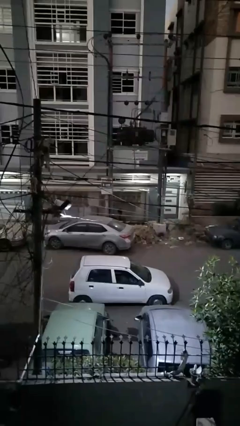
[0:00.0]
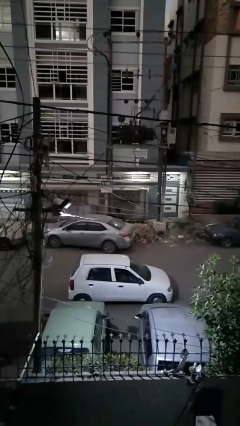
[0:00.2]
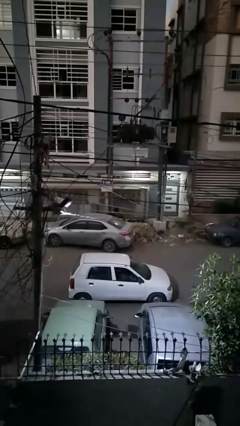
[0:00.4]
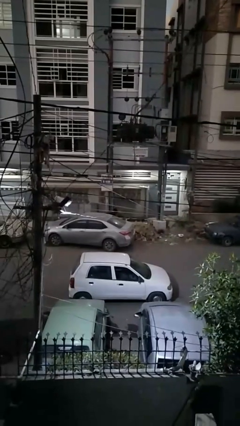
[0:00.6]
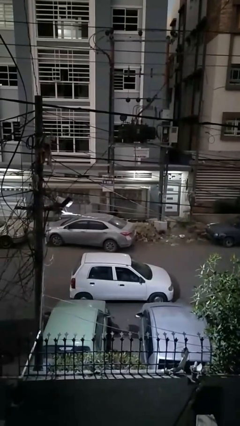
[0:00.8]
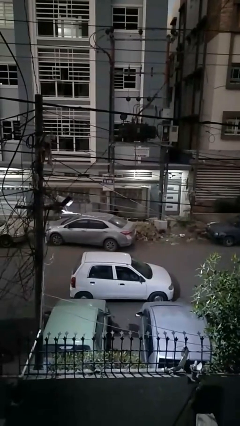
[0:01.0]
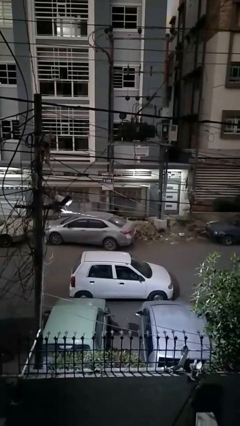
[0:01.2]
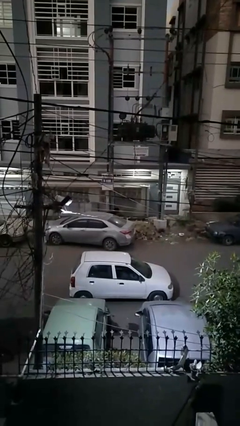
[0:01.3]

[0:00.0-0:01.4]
person loads car

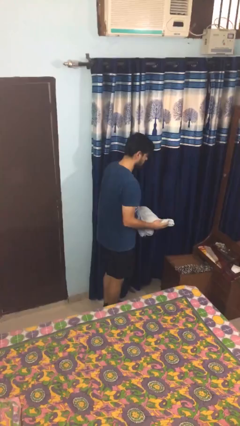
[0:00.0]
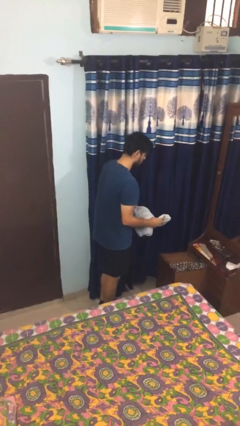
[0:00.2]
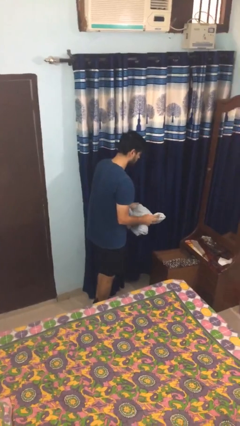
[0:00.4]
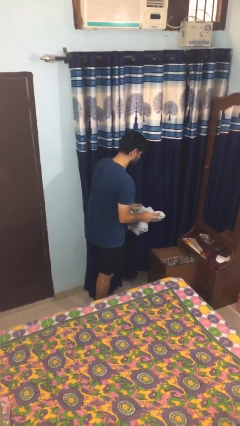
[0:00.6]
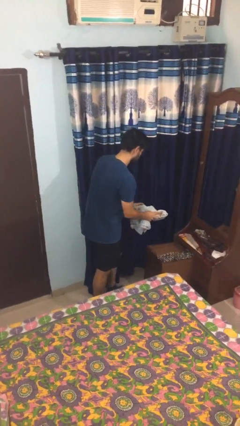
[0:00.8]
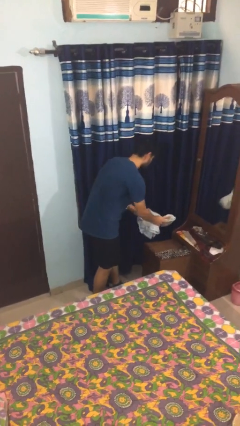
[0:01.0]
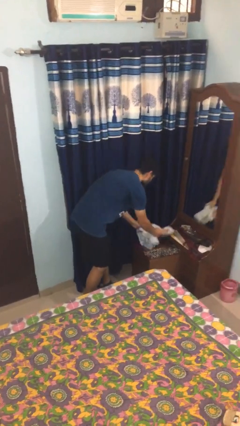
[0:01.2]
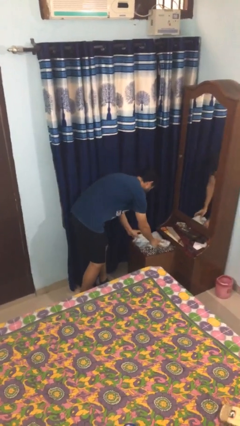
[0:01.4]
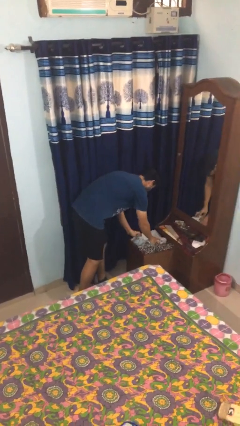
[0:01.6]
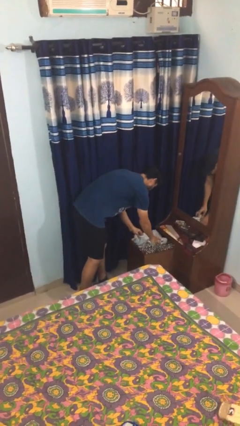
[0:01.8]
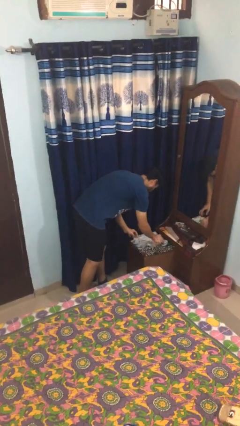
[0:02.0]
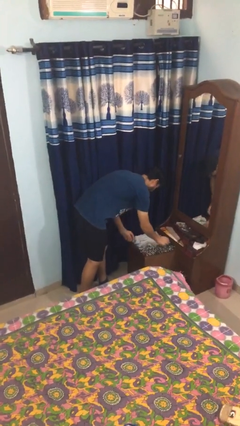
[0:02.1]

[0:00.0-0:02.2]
person puts clothes into dresser

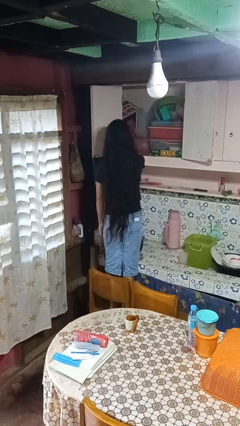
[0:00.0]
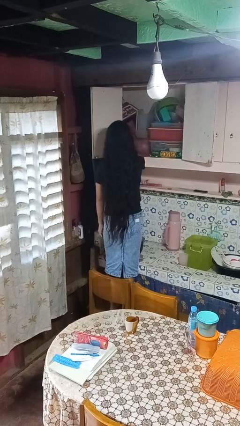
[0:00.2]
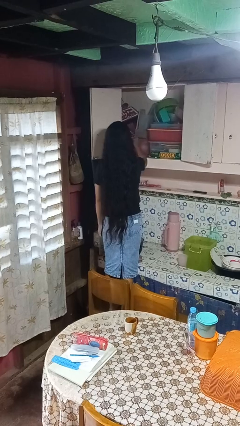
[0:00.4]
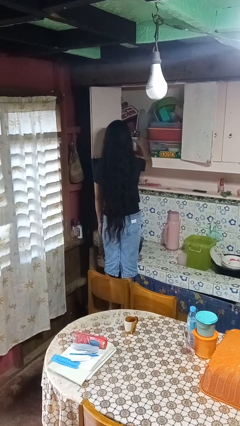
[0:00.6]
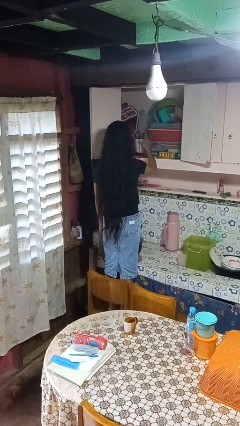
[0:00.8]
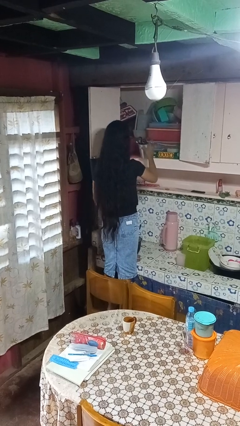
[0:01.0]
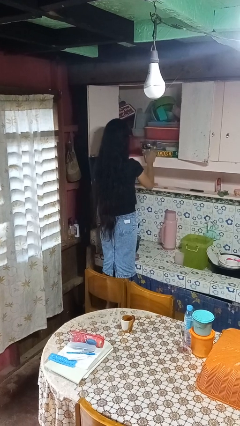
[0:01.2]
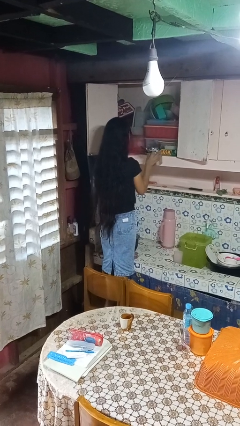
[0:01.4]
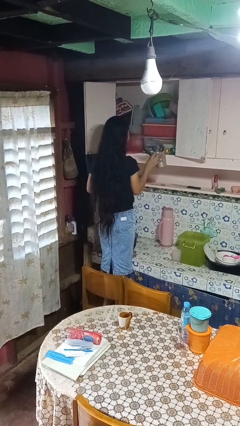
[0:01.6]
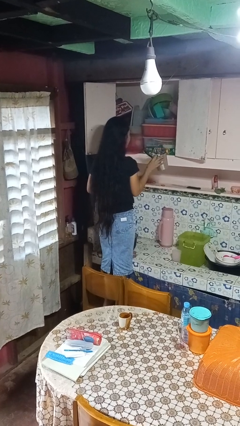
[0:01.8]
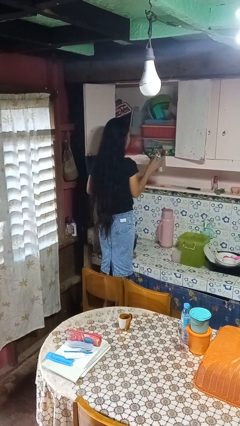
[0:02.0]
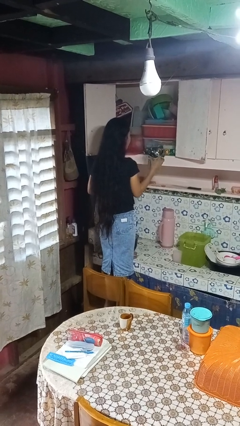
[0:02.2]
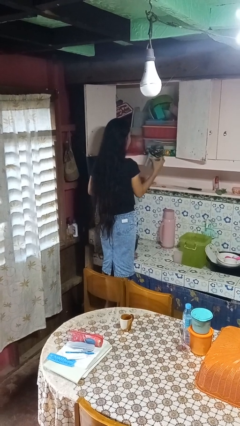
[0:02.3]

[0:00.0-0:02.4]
person takes object from cabinet

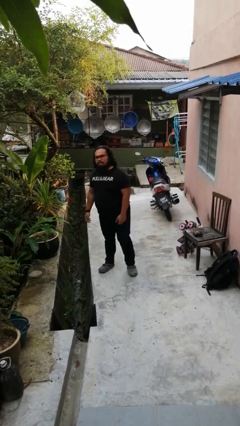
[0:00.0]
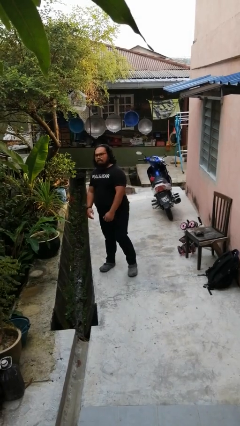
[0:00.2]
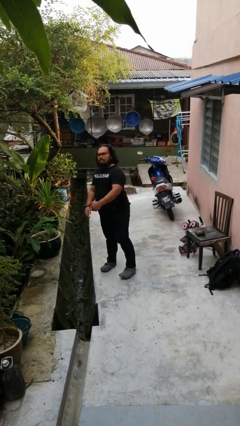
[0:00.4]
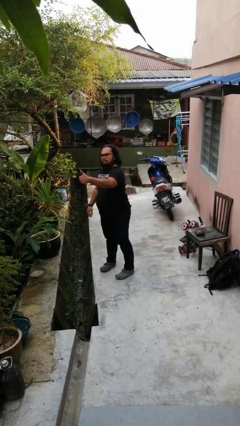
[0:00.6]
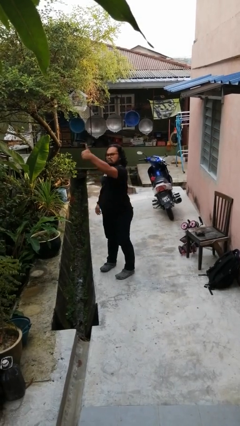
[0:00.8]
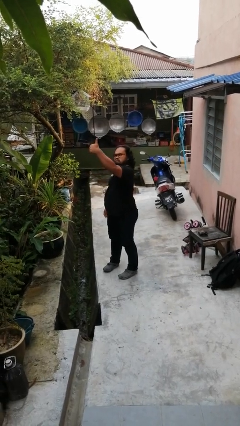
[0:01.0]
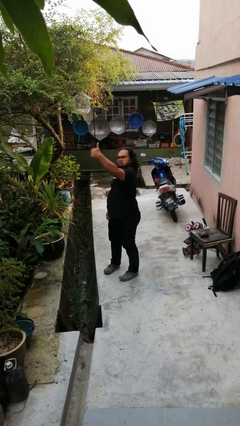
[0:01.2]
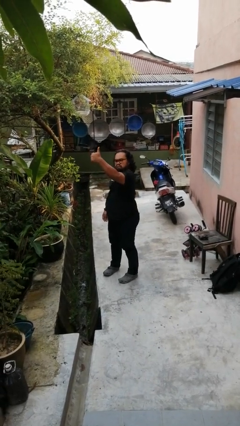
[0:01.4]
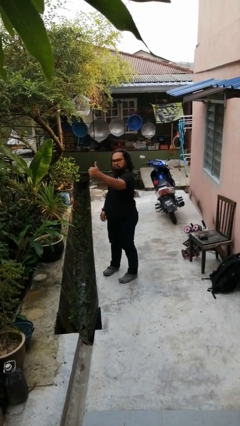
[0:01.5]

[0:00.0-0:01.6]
person gestures thumbs up

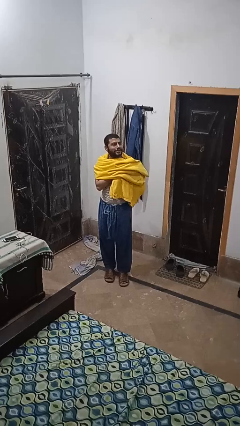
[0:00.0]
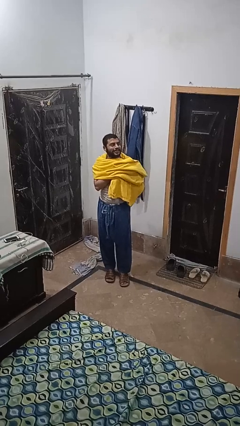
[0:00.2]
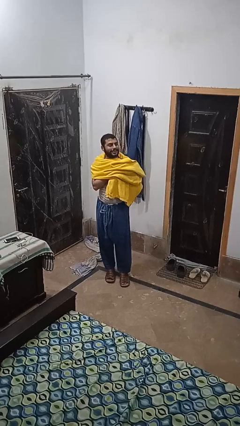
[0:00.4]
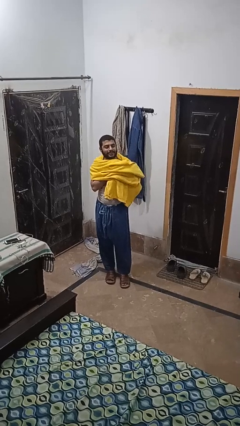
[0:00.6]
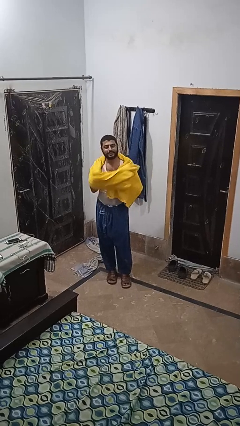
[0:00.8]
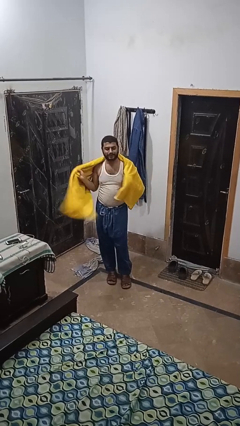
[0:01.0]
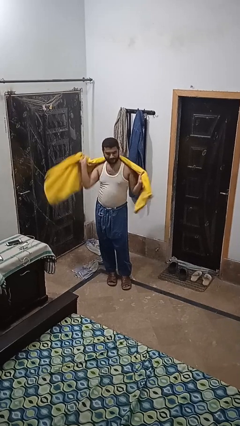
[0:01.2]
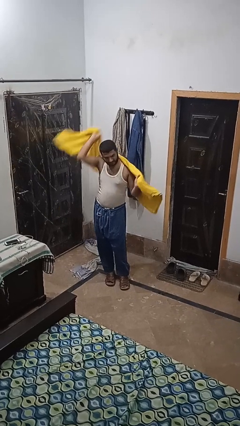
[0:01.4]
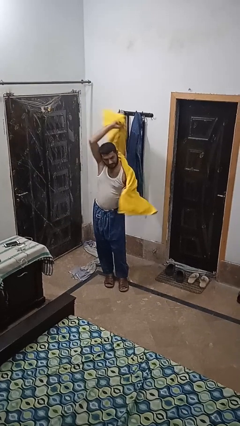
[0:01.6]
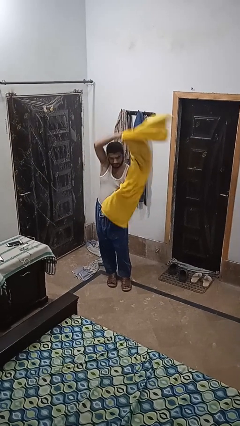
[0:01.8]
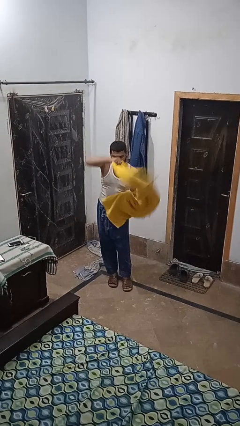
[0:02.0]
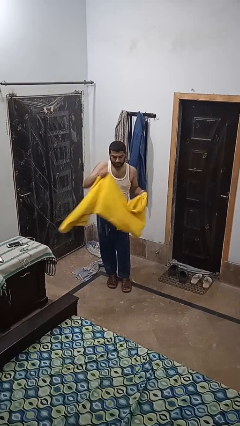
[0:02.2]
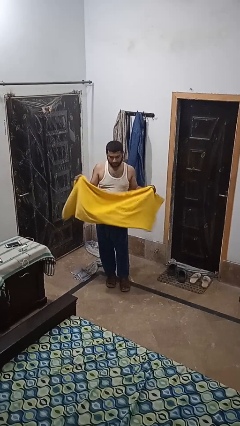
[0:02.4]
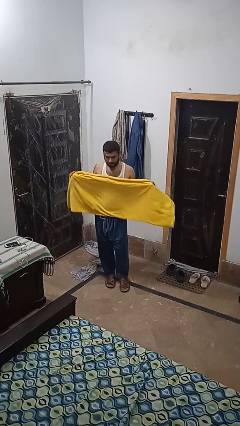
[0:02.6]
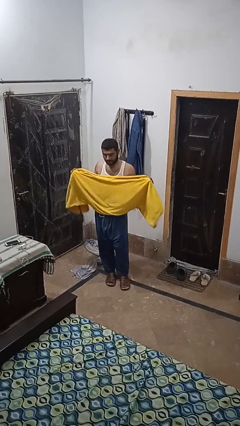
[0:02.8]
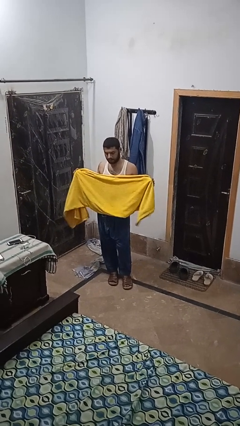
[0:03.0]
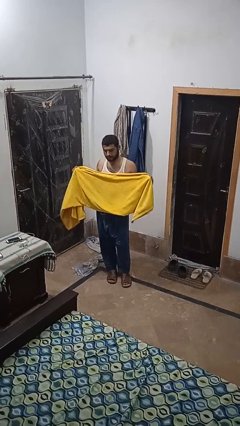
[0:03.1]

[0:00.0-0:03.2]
person takes off scarf

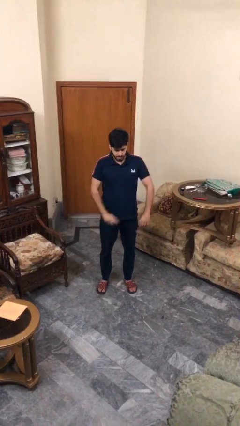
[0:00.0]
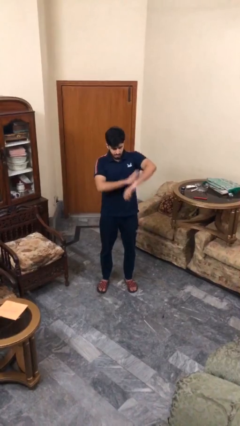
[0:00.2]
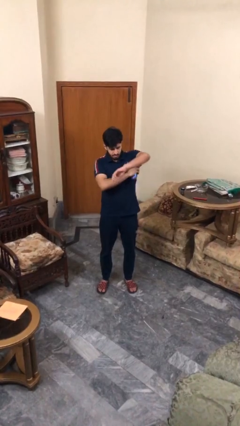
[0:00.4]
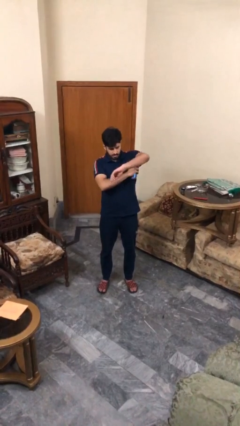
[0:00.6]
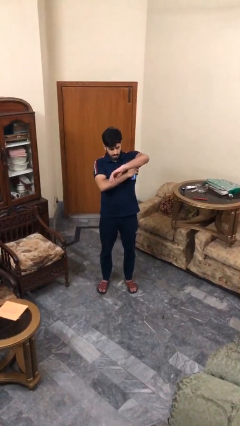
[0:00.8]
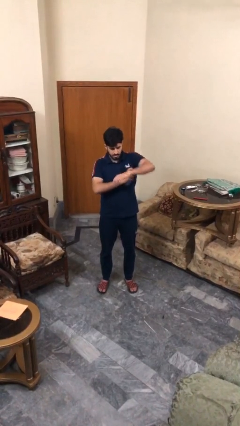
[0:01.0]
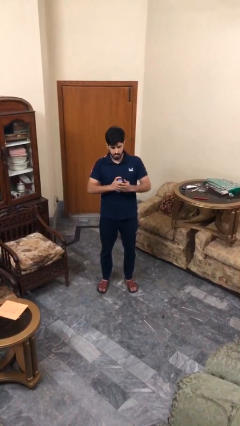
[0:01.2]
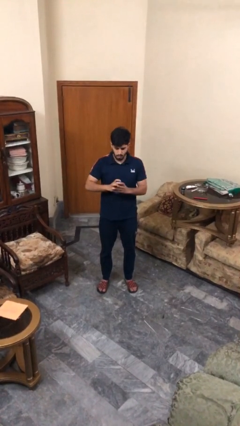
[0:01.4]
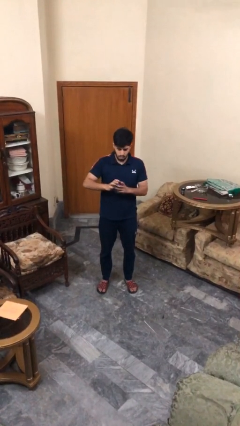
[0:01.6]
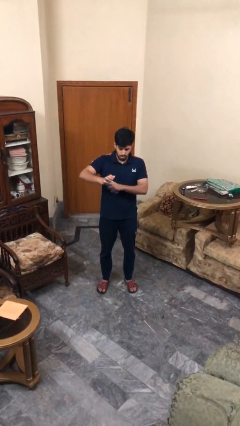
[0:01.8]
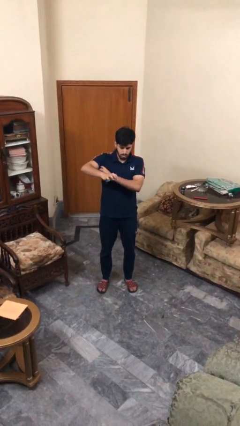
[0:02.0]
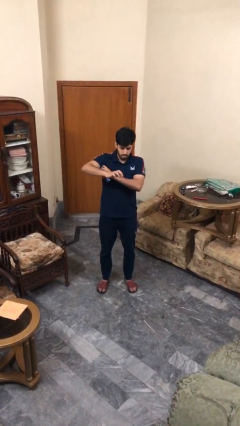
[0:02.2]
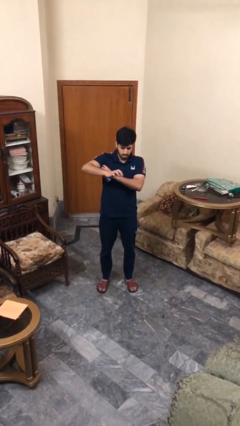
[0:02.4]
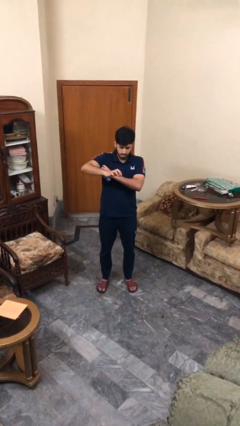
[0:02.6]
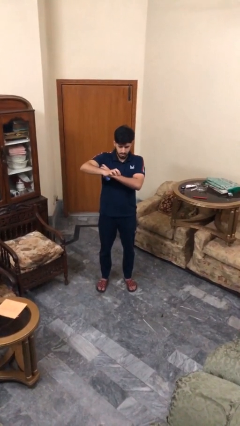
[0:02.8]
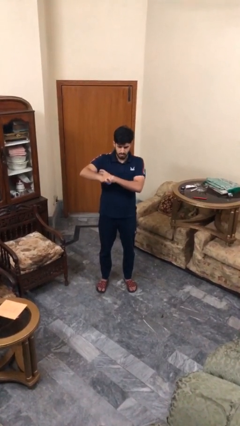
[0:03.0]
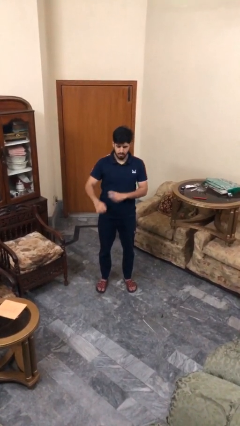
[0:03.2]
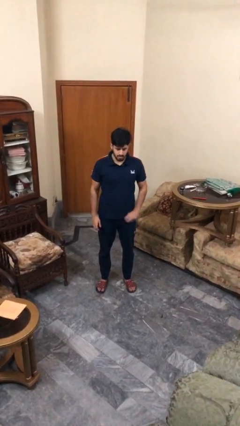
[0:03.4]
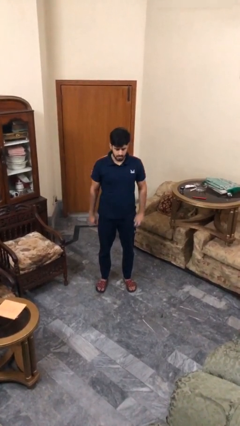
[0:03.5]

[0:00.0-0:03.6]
person applies deodorant

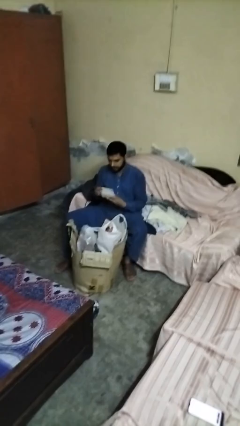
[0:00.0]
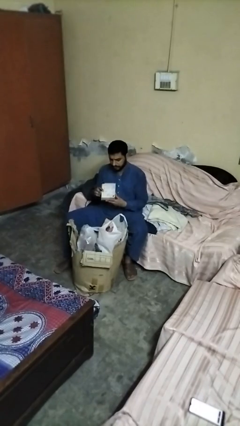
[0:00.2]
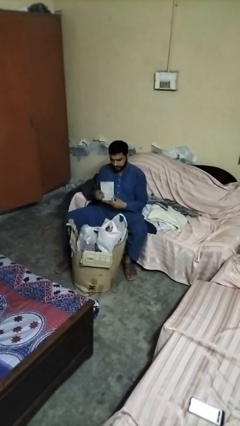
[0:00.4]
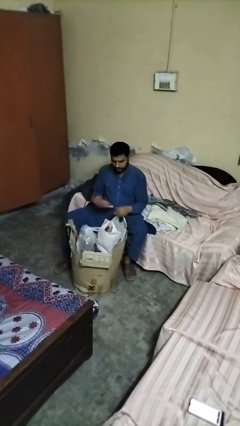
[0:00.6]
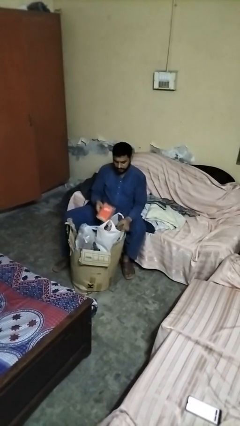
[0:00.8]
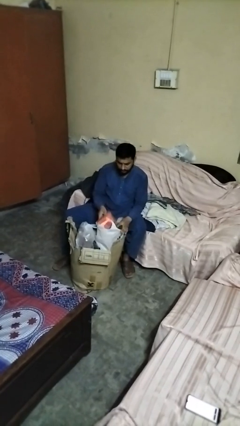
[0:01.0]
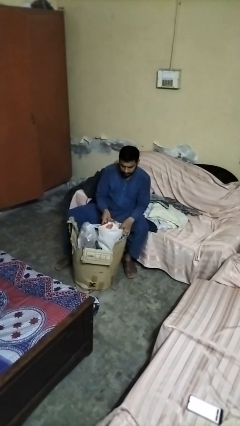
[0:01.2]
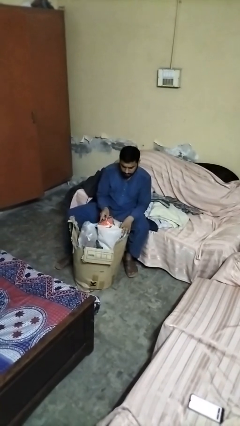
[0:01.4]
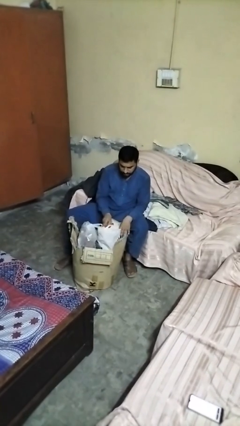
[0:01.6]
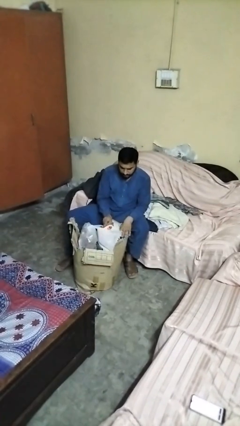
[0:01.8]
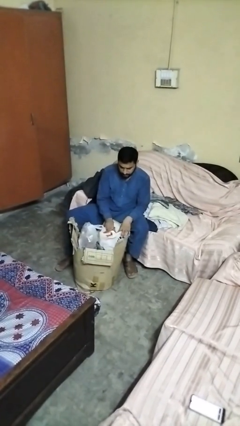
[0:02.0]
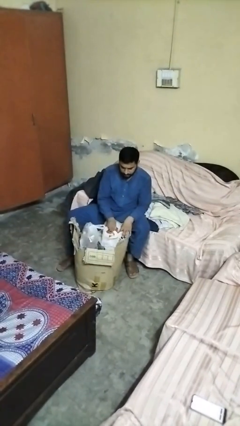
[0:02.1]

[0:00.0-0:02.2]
person puts object into box

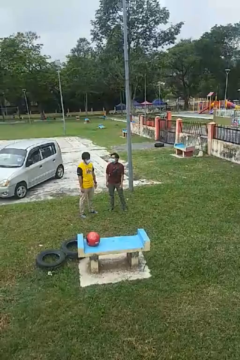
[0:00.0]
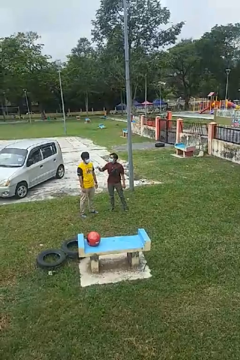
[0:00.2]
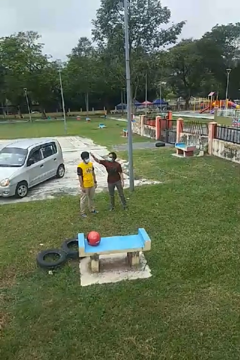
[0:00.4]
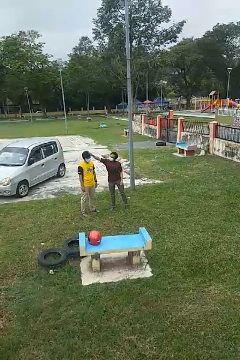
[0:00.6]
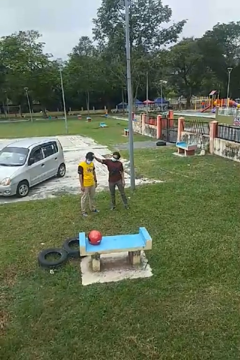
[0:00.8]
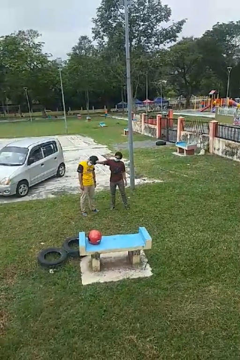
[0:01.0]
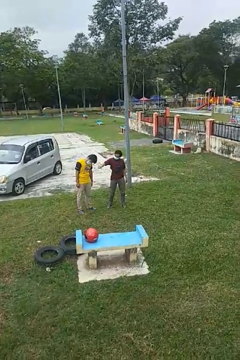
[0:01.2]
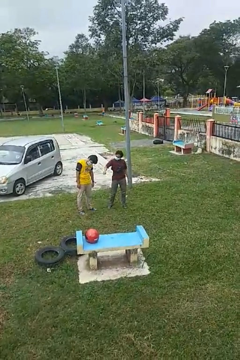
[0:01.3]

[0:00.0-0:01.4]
person grabs person by hair
